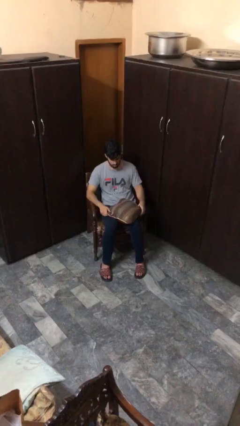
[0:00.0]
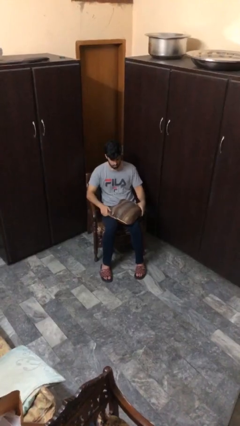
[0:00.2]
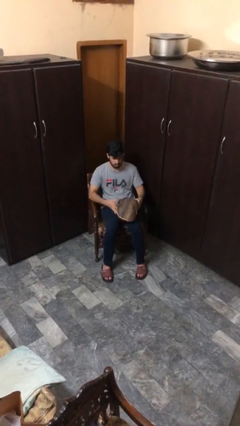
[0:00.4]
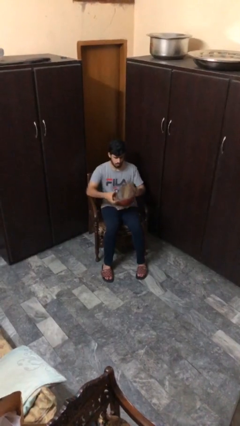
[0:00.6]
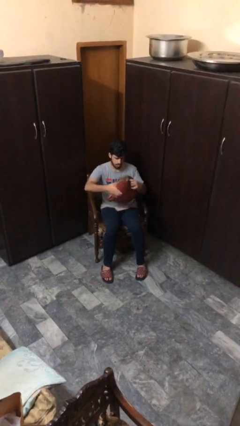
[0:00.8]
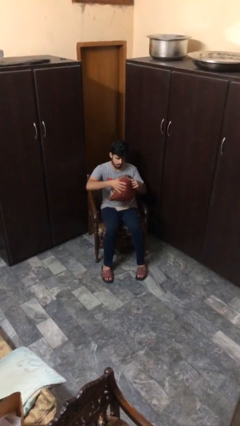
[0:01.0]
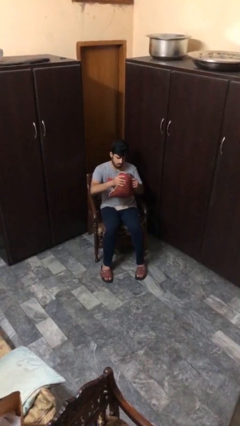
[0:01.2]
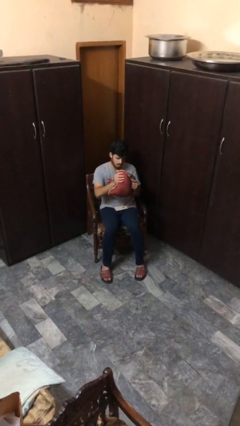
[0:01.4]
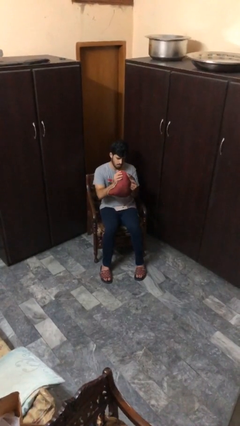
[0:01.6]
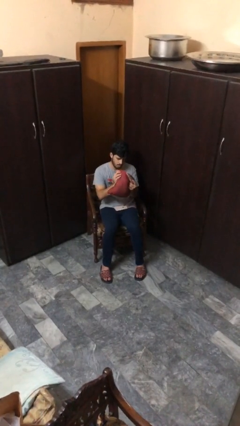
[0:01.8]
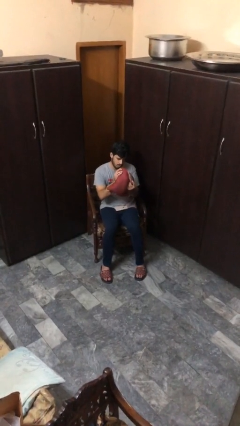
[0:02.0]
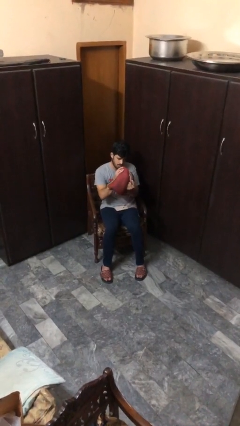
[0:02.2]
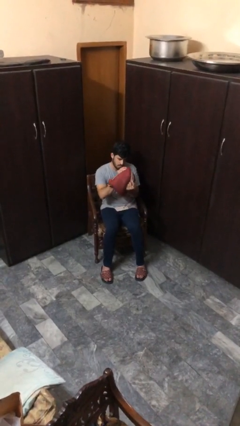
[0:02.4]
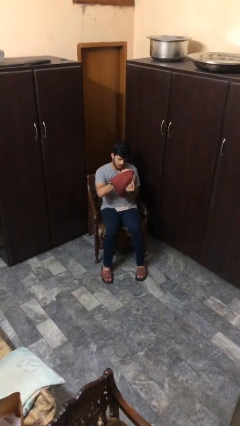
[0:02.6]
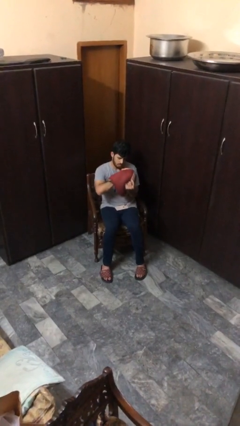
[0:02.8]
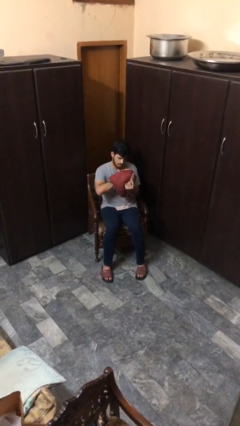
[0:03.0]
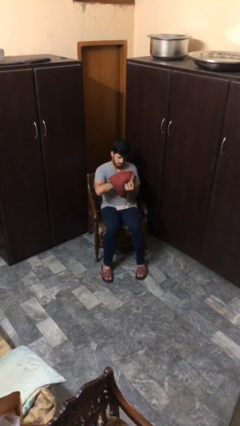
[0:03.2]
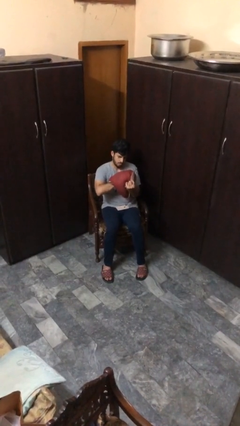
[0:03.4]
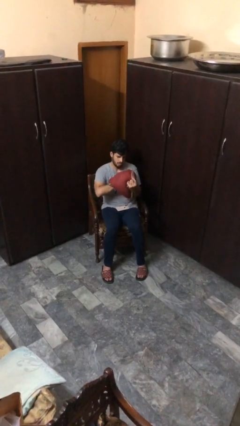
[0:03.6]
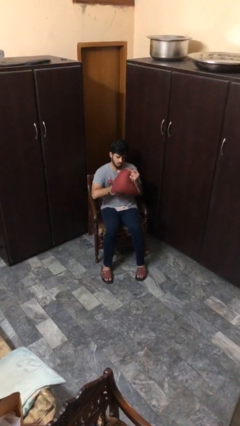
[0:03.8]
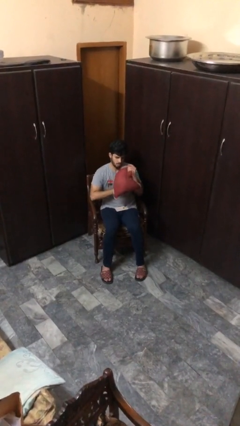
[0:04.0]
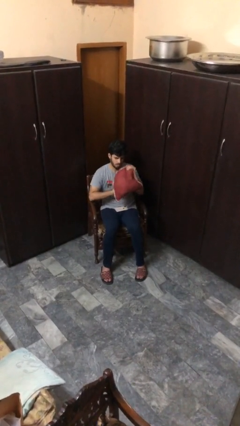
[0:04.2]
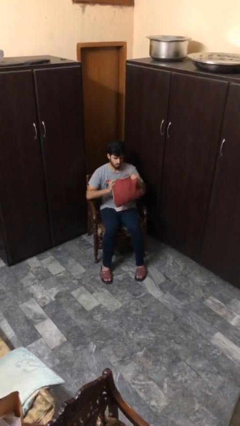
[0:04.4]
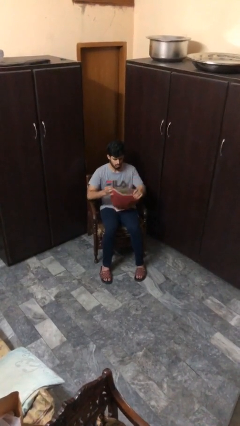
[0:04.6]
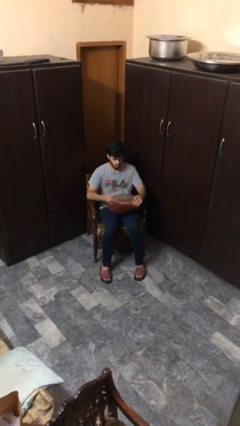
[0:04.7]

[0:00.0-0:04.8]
person squeezes object

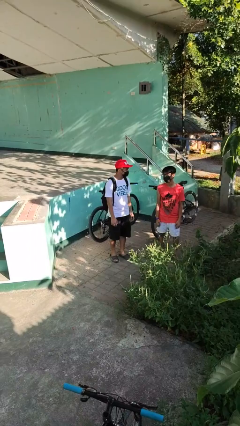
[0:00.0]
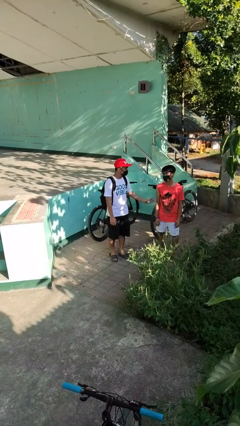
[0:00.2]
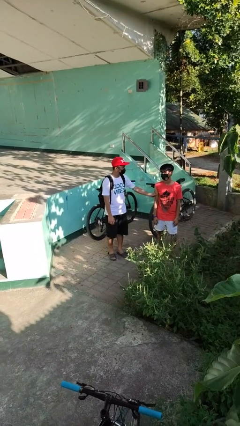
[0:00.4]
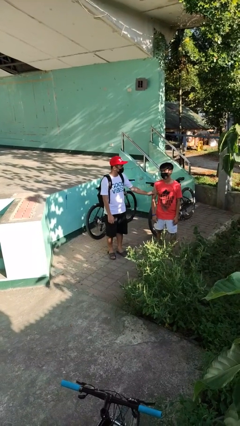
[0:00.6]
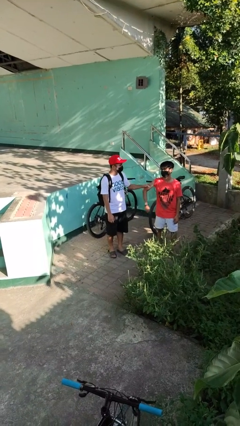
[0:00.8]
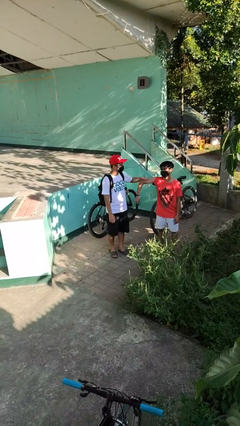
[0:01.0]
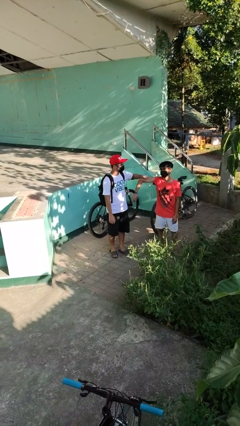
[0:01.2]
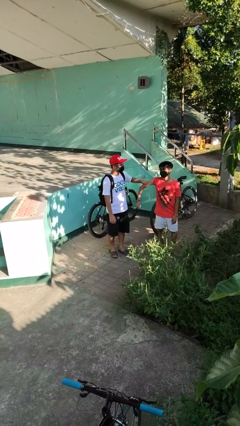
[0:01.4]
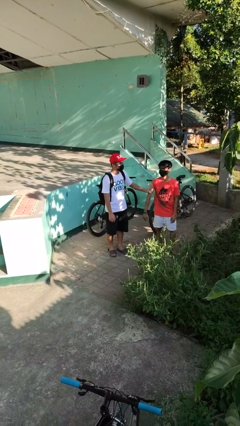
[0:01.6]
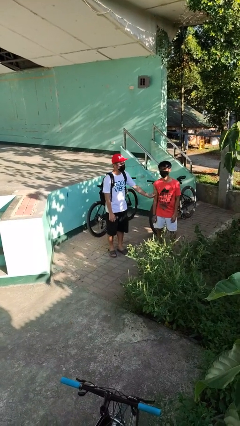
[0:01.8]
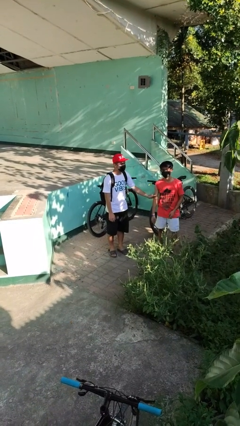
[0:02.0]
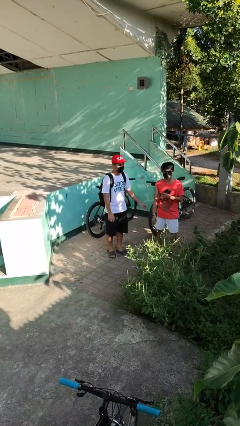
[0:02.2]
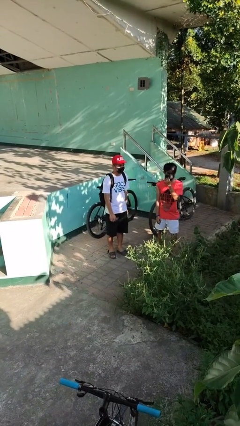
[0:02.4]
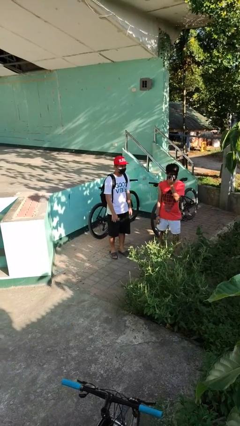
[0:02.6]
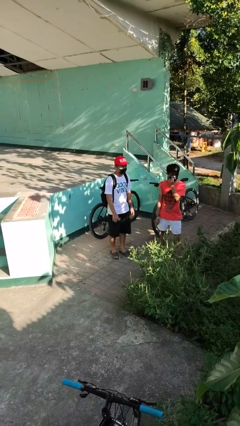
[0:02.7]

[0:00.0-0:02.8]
person grabs person by bicep

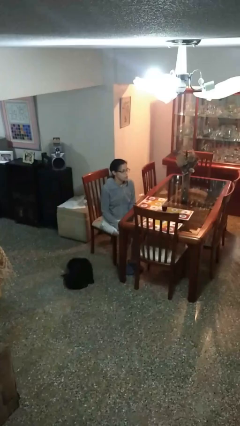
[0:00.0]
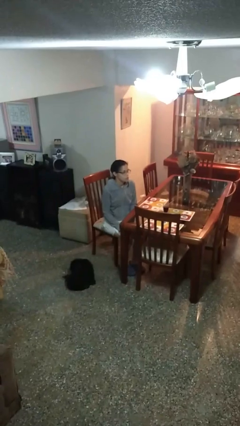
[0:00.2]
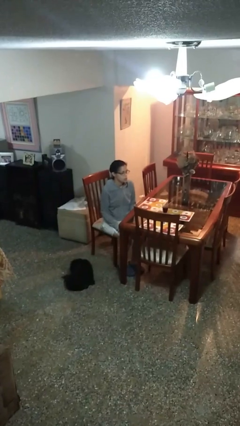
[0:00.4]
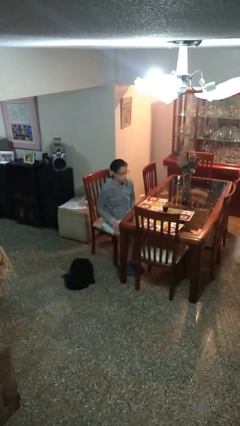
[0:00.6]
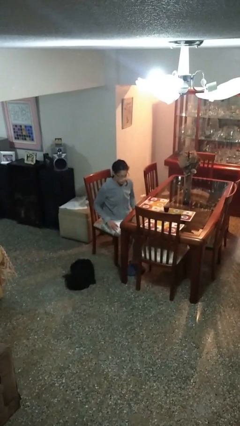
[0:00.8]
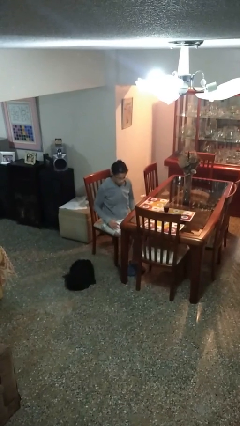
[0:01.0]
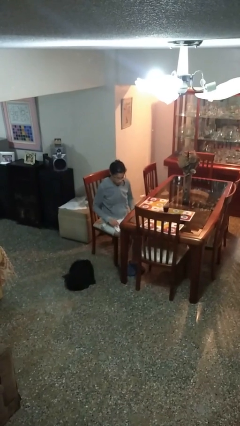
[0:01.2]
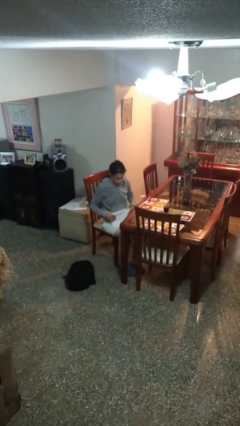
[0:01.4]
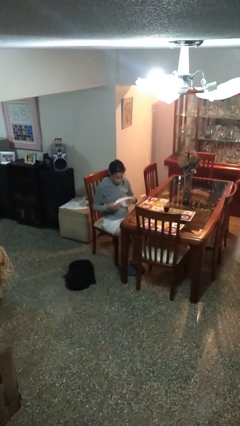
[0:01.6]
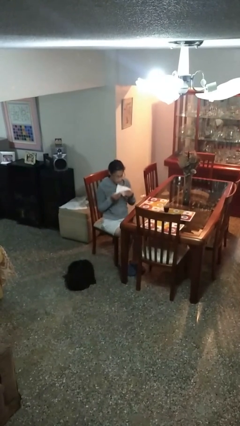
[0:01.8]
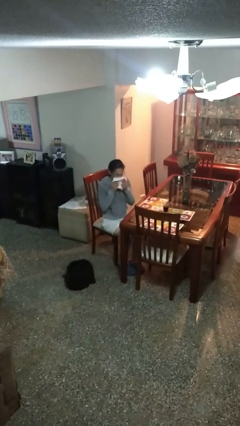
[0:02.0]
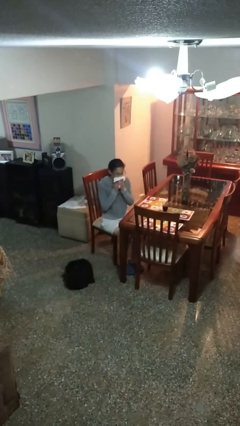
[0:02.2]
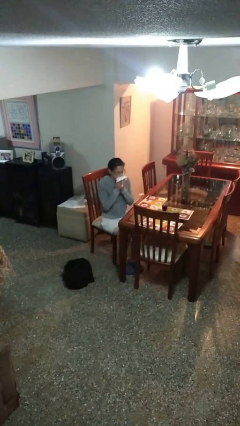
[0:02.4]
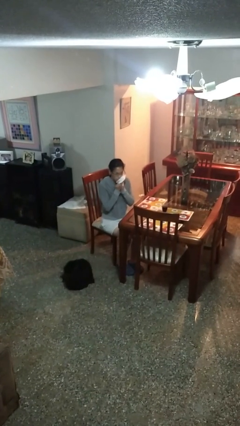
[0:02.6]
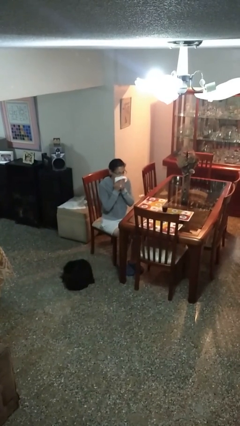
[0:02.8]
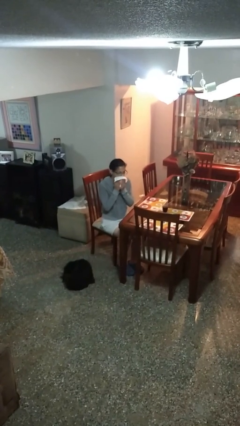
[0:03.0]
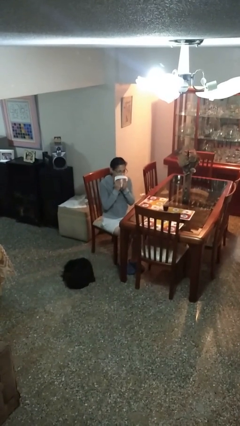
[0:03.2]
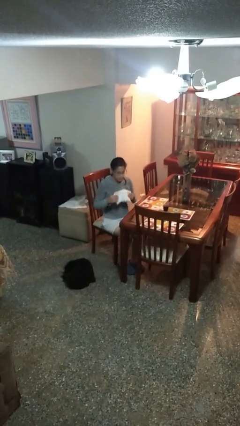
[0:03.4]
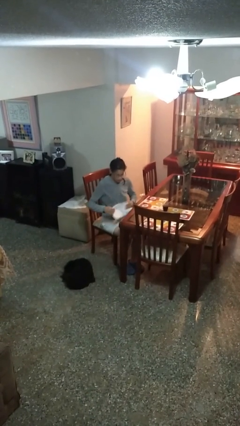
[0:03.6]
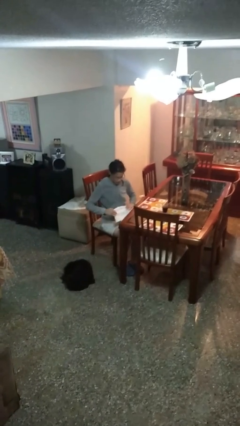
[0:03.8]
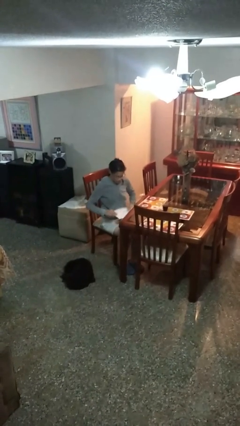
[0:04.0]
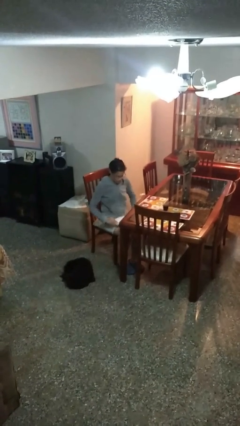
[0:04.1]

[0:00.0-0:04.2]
person wipes mouth with napkin

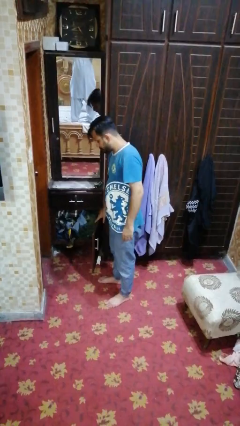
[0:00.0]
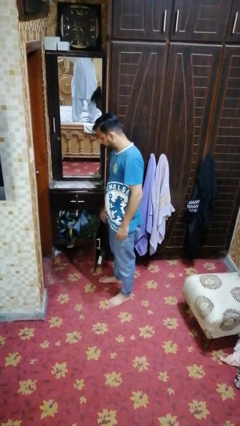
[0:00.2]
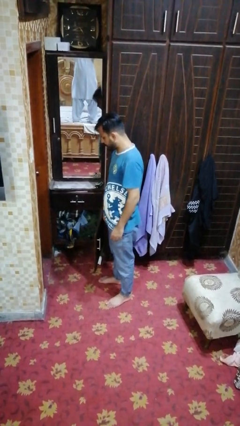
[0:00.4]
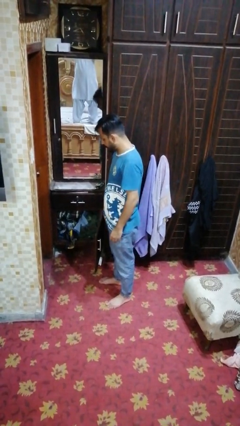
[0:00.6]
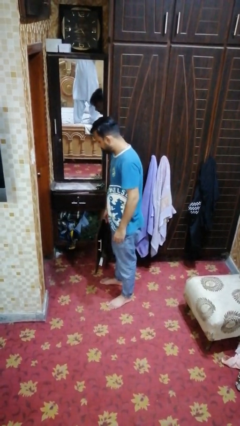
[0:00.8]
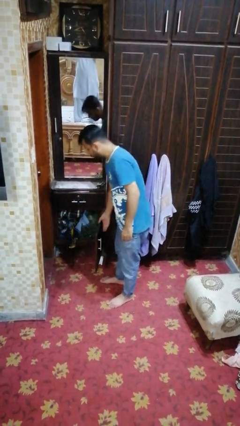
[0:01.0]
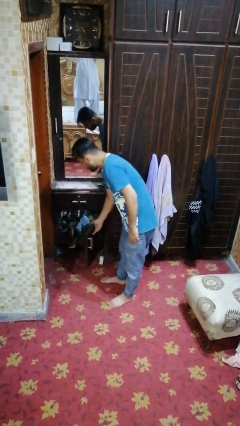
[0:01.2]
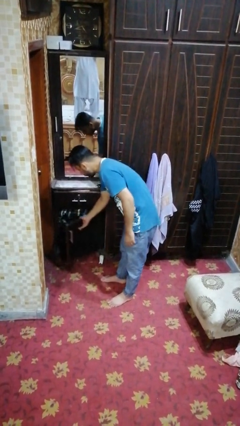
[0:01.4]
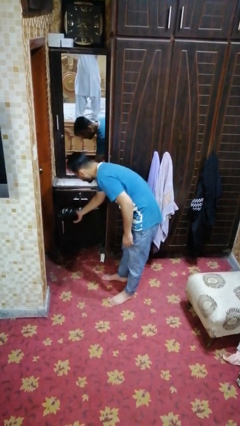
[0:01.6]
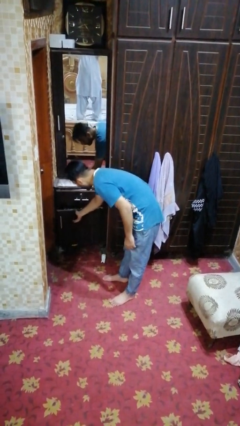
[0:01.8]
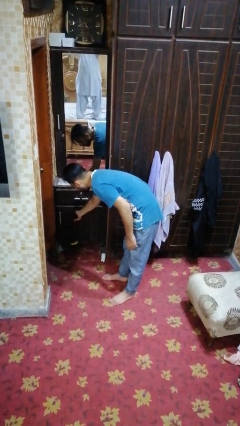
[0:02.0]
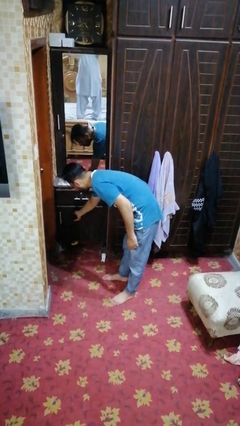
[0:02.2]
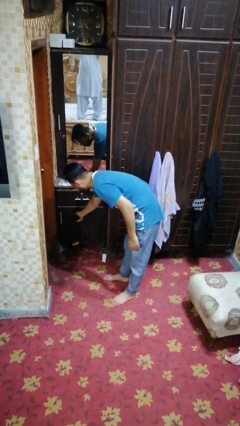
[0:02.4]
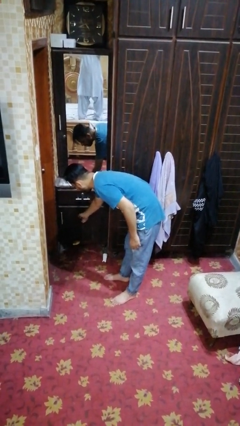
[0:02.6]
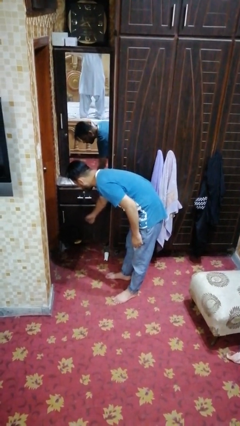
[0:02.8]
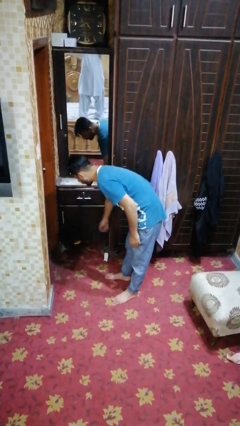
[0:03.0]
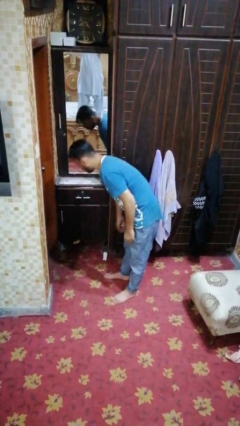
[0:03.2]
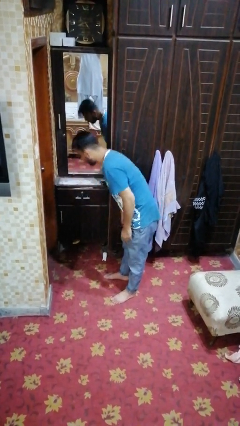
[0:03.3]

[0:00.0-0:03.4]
person closes dresser drawer

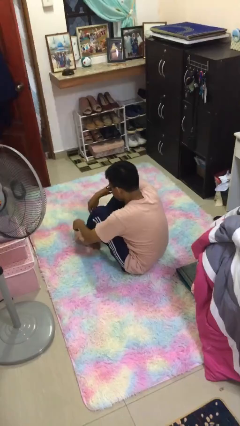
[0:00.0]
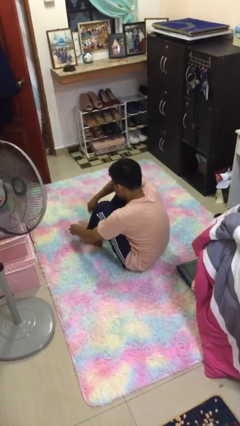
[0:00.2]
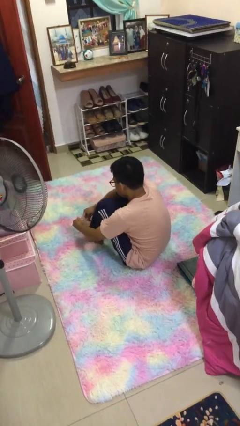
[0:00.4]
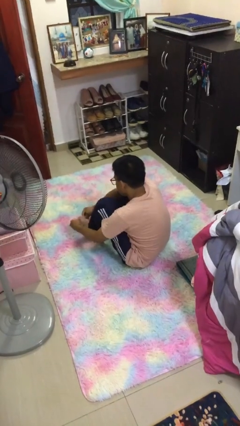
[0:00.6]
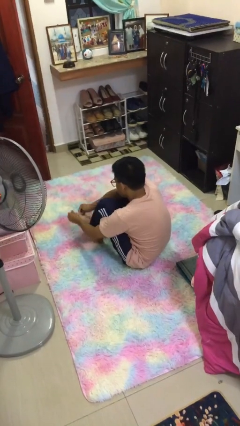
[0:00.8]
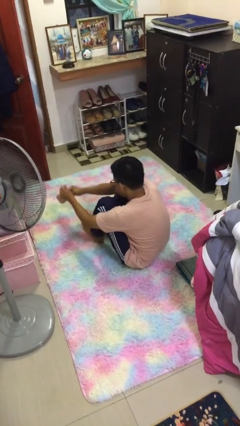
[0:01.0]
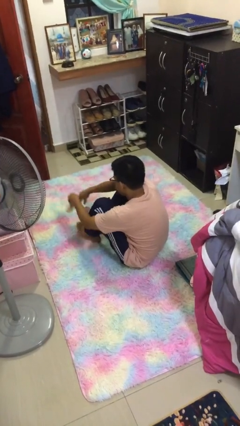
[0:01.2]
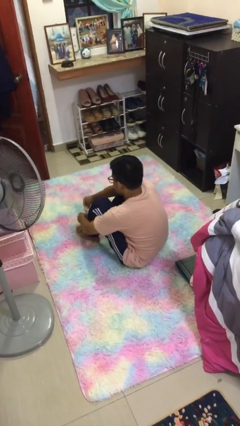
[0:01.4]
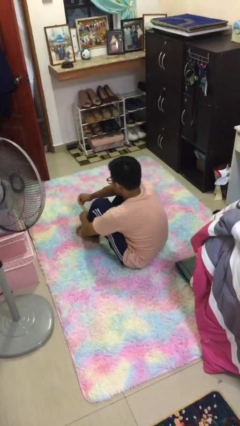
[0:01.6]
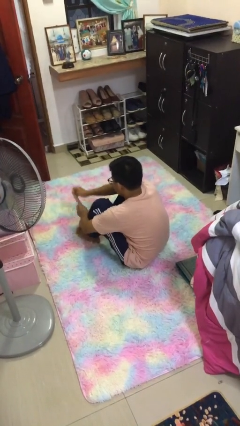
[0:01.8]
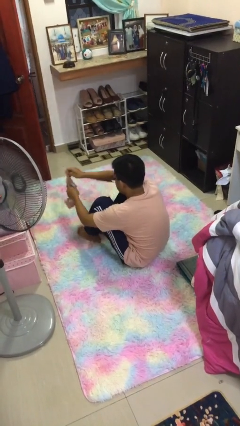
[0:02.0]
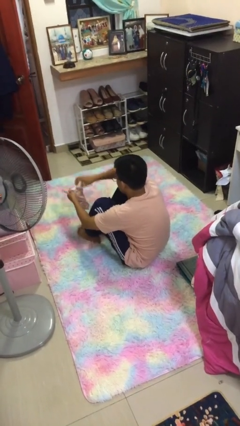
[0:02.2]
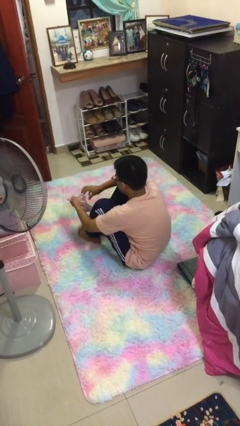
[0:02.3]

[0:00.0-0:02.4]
person takes off socks

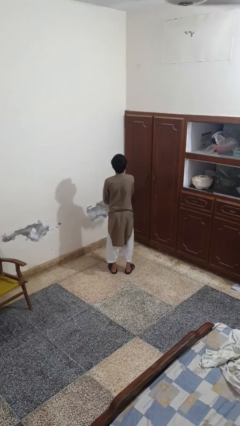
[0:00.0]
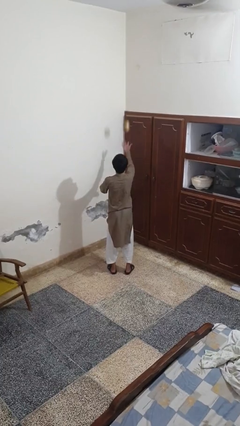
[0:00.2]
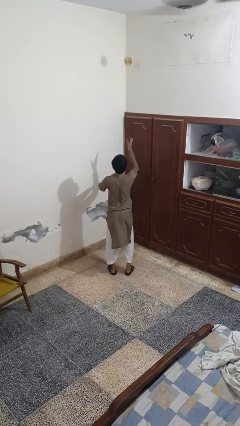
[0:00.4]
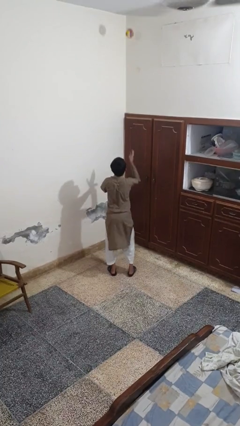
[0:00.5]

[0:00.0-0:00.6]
person drops object
